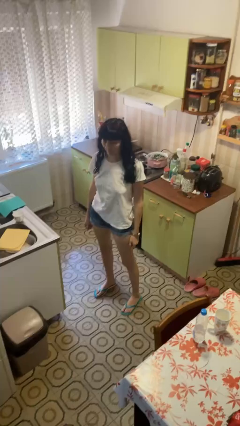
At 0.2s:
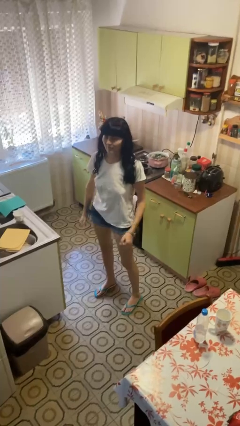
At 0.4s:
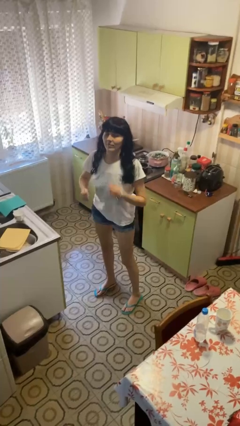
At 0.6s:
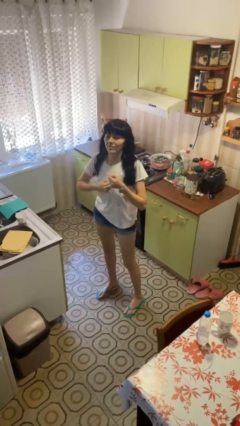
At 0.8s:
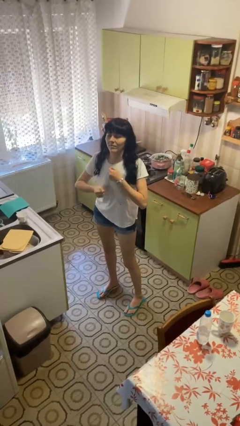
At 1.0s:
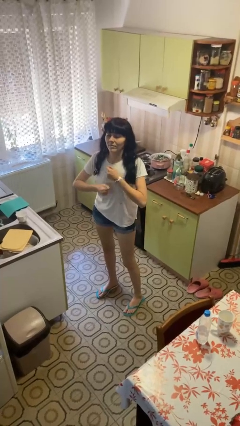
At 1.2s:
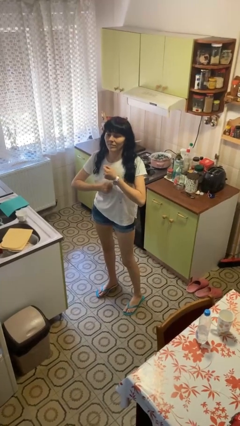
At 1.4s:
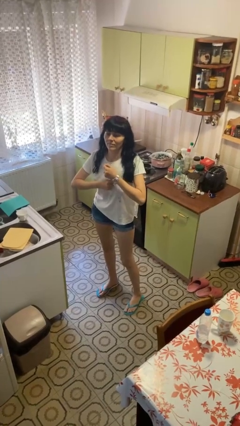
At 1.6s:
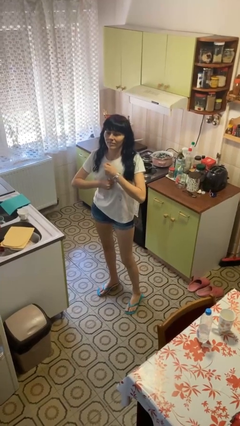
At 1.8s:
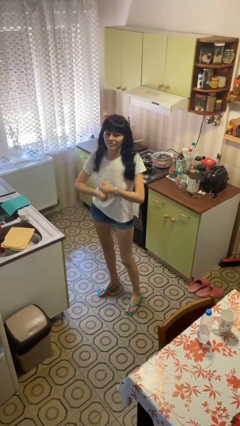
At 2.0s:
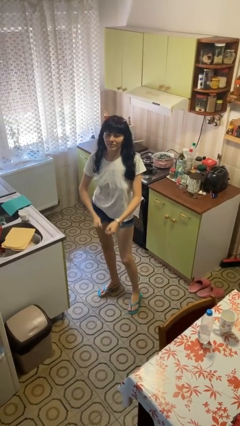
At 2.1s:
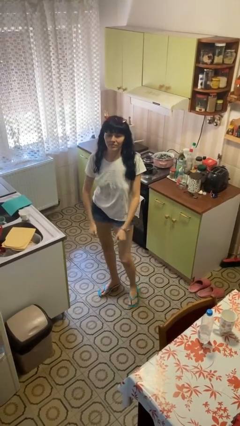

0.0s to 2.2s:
person drums on chest

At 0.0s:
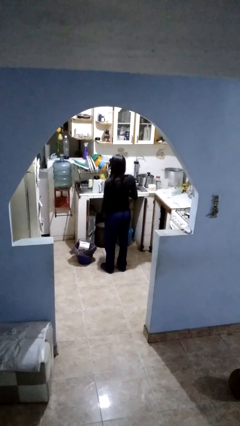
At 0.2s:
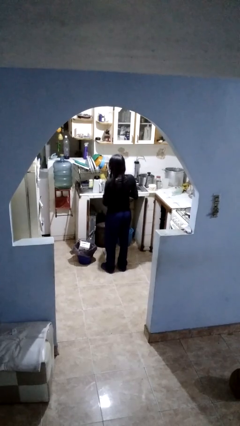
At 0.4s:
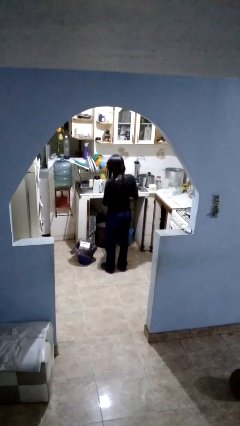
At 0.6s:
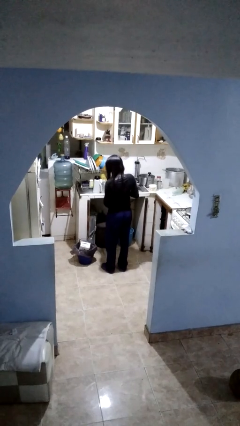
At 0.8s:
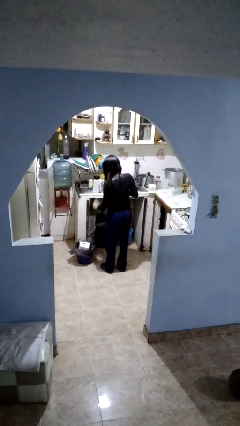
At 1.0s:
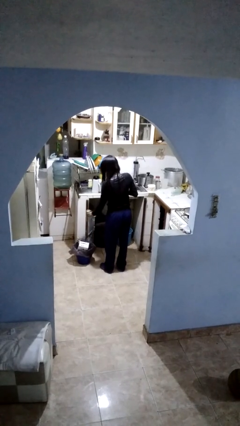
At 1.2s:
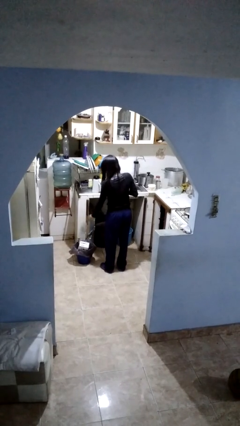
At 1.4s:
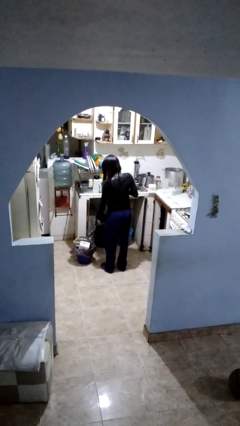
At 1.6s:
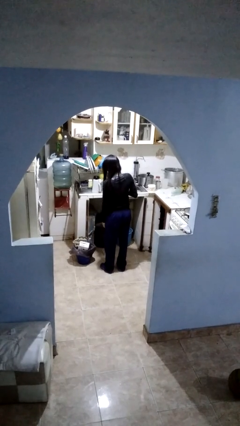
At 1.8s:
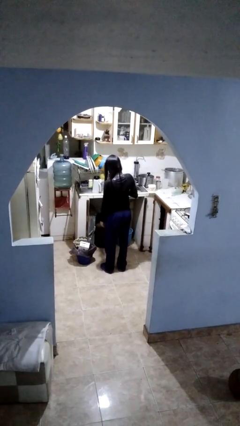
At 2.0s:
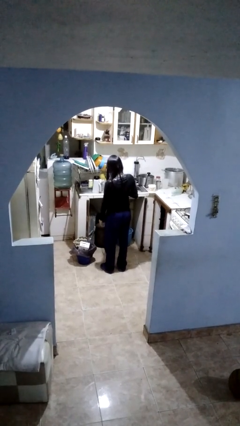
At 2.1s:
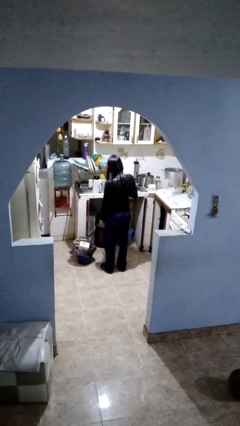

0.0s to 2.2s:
person discards trash

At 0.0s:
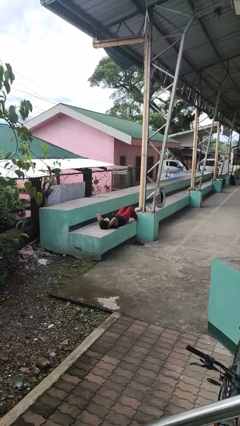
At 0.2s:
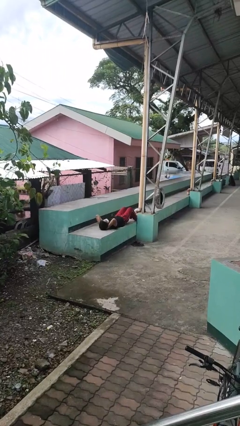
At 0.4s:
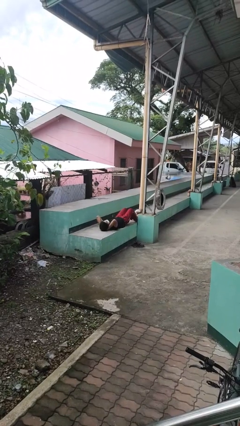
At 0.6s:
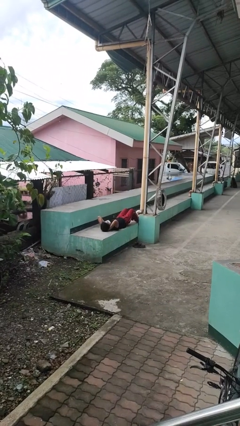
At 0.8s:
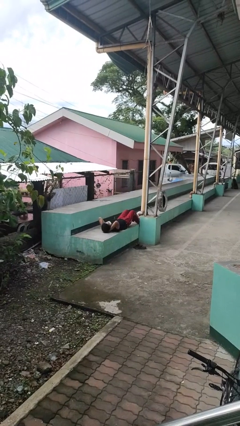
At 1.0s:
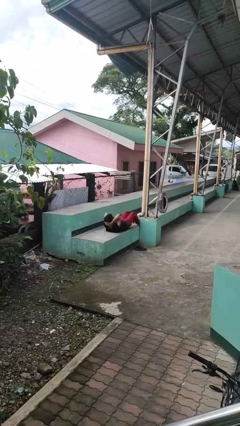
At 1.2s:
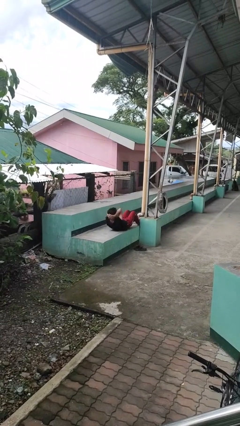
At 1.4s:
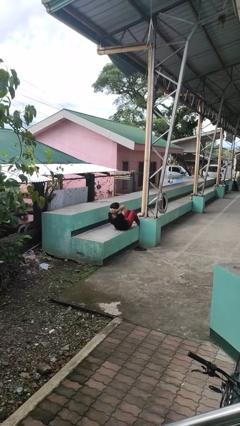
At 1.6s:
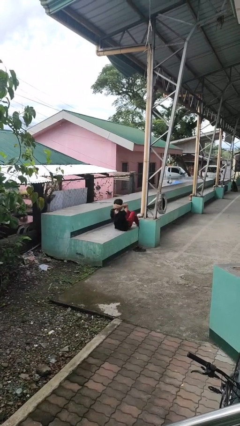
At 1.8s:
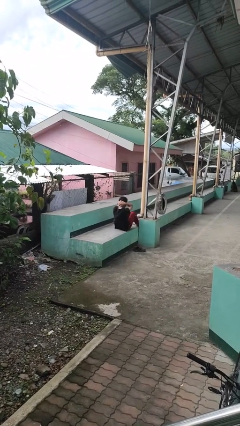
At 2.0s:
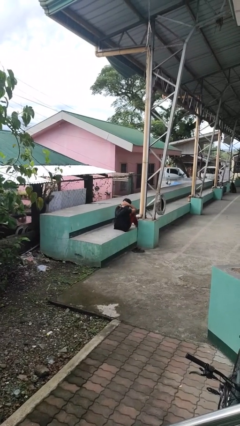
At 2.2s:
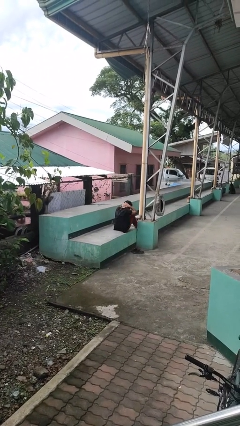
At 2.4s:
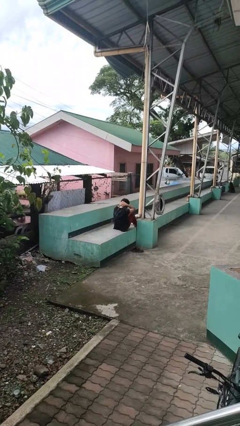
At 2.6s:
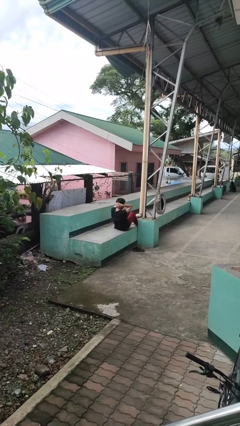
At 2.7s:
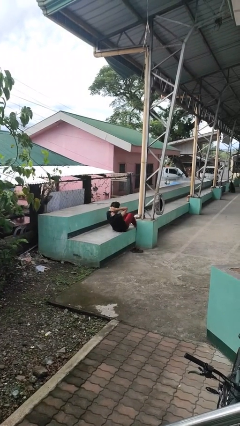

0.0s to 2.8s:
person exercises with situp

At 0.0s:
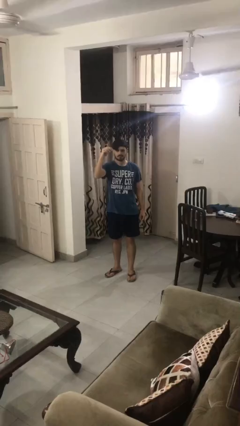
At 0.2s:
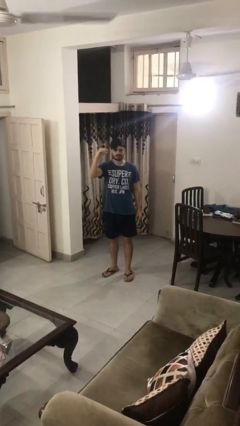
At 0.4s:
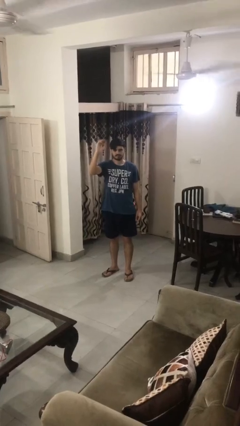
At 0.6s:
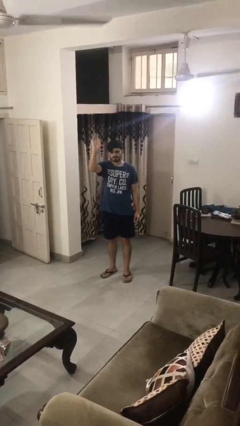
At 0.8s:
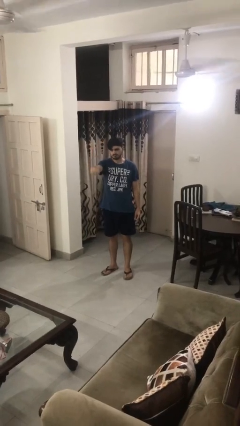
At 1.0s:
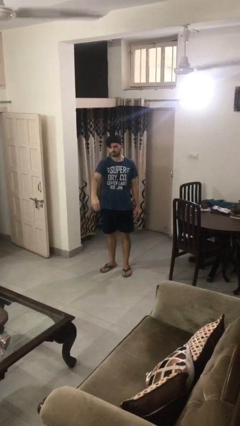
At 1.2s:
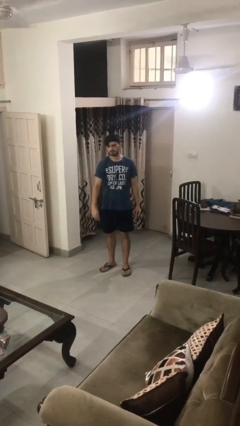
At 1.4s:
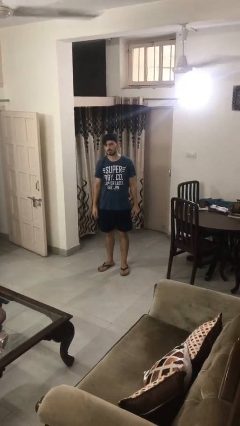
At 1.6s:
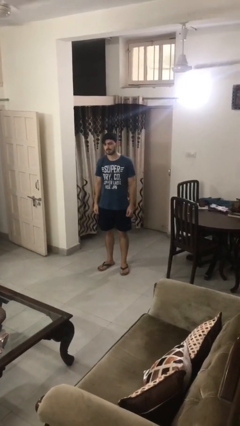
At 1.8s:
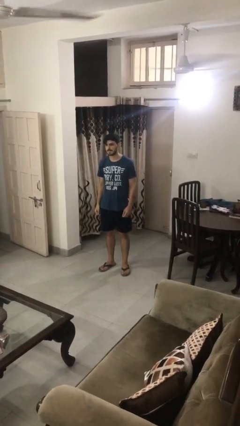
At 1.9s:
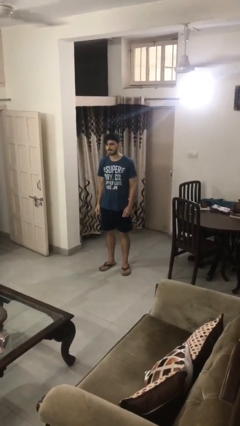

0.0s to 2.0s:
person gestures swipe down

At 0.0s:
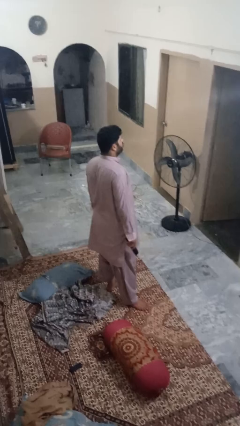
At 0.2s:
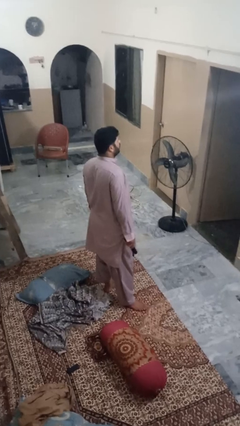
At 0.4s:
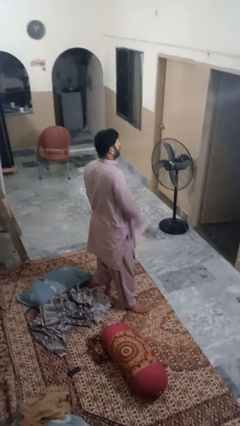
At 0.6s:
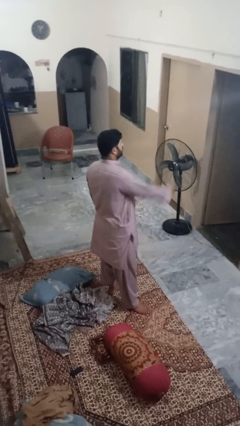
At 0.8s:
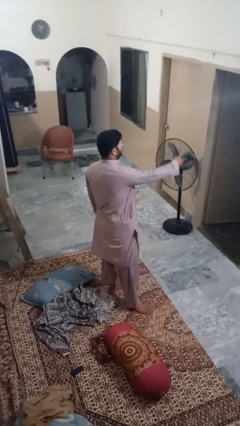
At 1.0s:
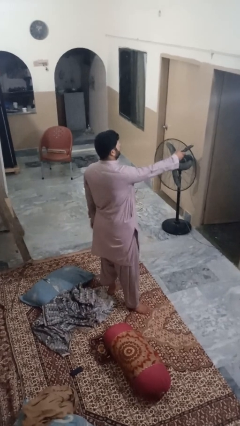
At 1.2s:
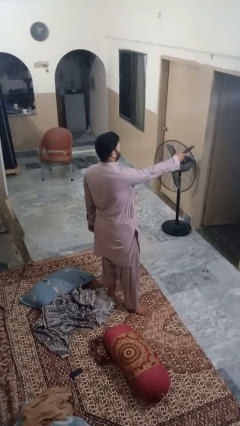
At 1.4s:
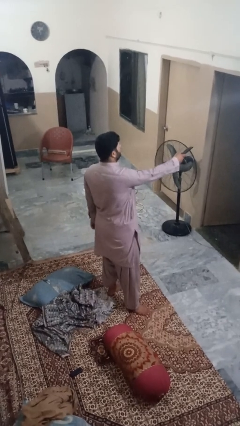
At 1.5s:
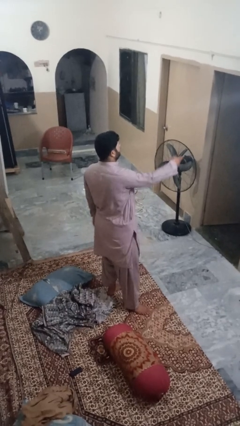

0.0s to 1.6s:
person uses television remote

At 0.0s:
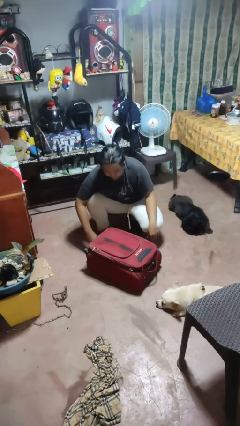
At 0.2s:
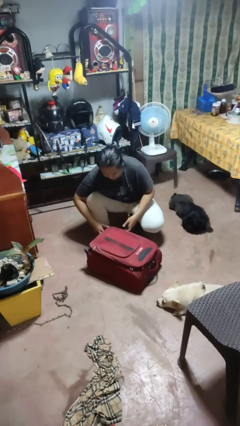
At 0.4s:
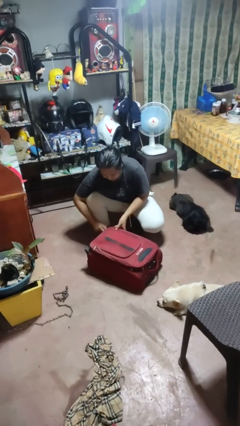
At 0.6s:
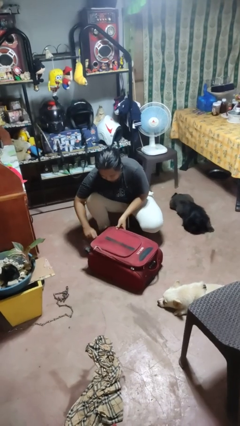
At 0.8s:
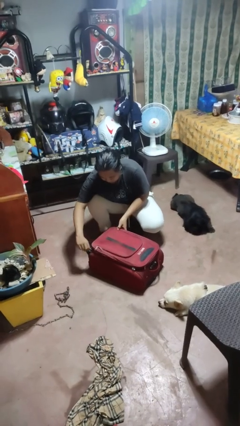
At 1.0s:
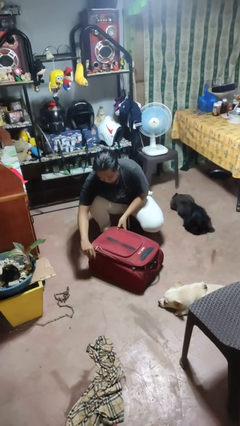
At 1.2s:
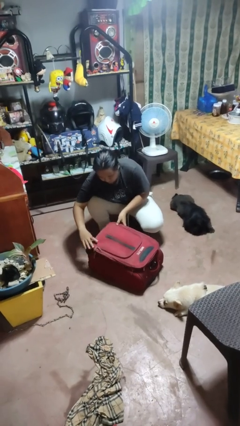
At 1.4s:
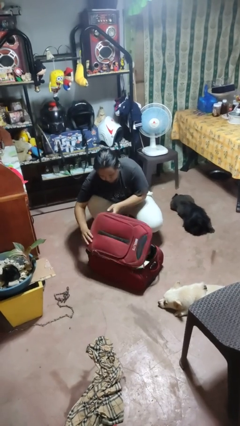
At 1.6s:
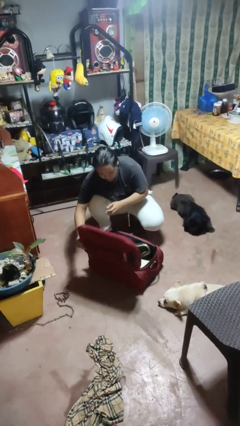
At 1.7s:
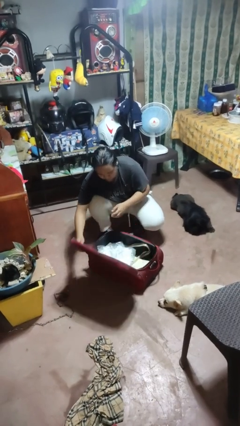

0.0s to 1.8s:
person opens suitcase

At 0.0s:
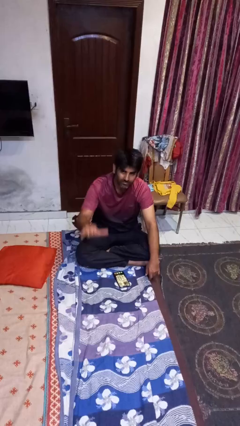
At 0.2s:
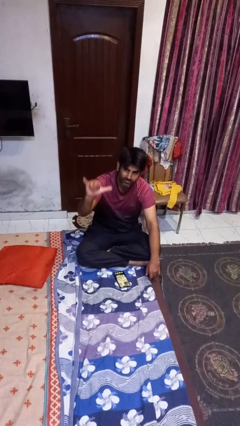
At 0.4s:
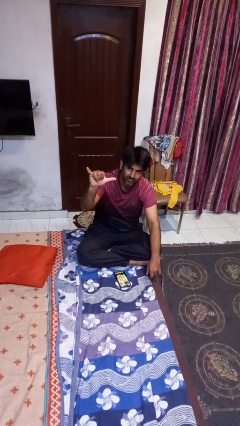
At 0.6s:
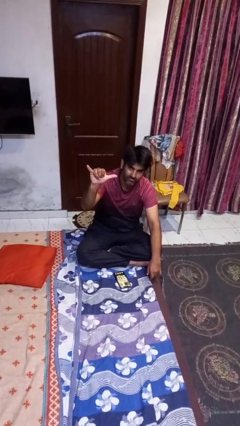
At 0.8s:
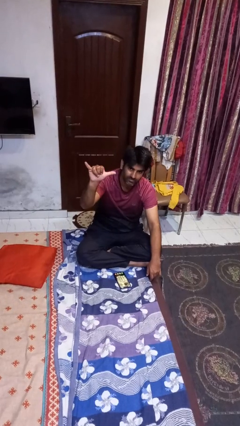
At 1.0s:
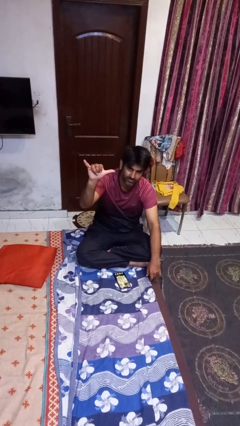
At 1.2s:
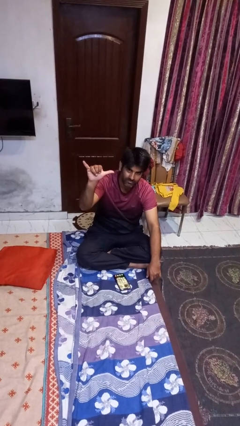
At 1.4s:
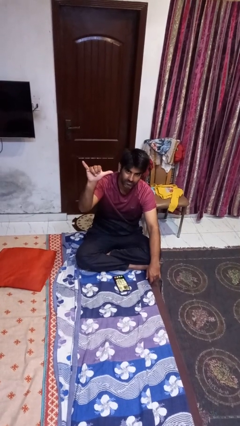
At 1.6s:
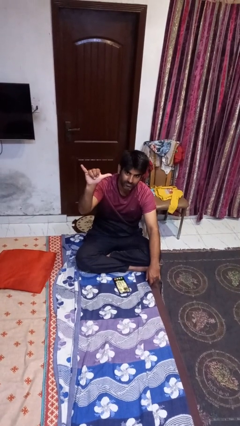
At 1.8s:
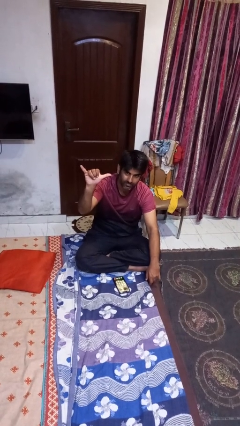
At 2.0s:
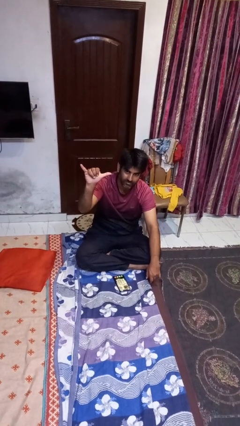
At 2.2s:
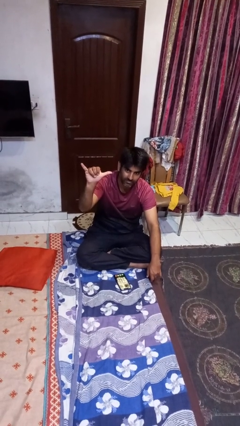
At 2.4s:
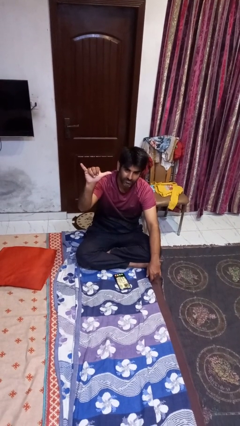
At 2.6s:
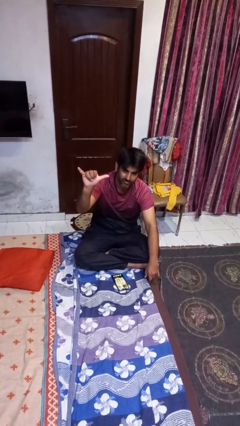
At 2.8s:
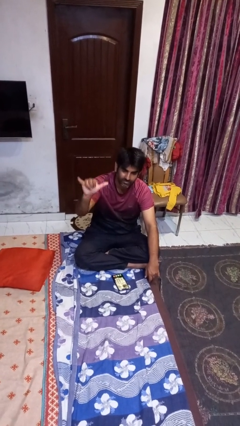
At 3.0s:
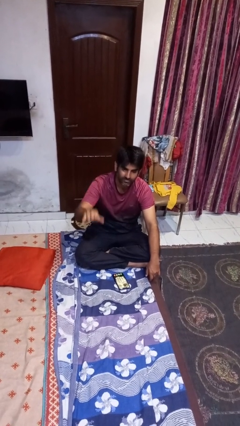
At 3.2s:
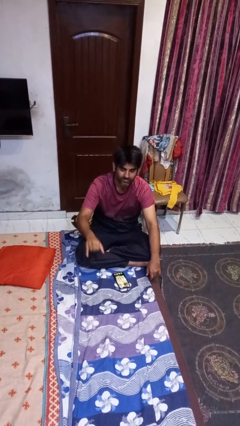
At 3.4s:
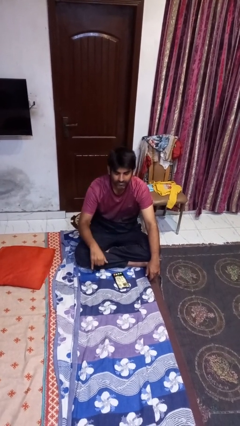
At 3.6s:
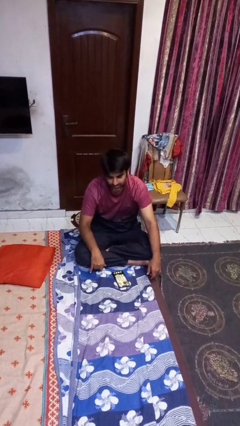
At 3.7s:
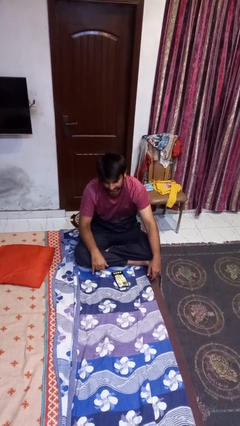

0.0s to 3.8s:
person gestures hang loose

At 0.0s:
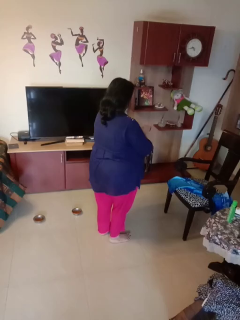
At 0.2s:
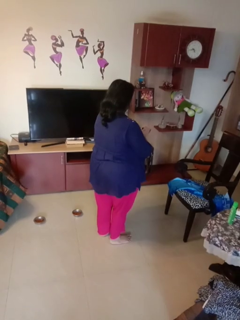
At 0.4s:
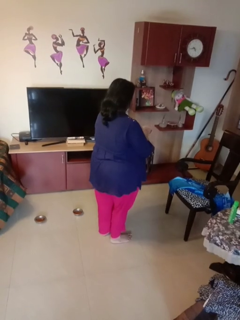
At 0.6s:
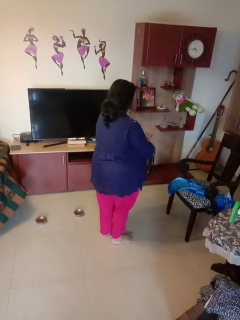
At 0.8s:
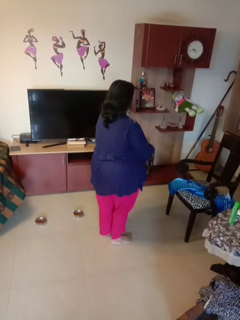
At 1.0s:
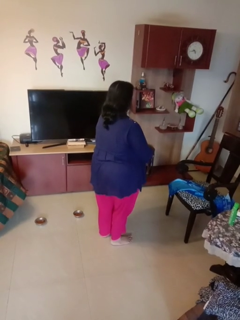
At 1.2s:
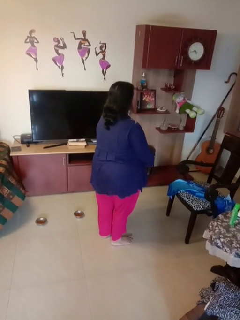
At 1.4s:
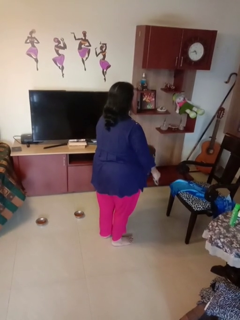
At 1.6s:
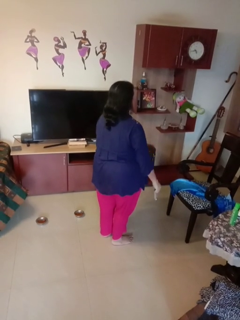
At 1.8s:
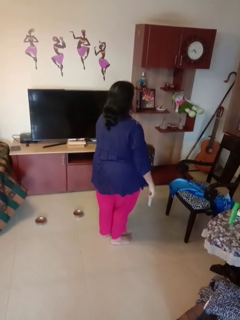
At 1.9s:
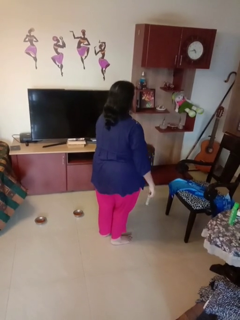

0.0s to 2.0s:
person takes off wristwatch
